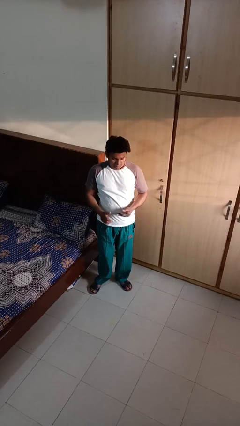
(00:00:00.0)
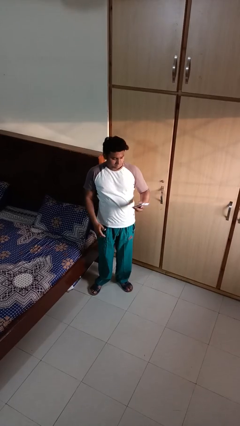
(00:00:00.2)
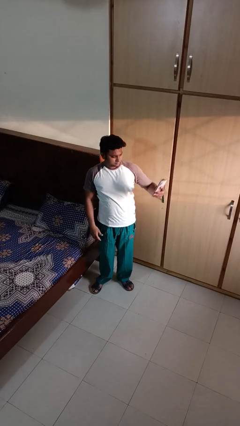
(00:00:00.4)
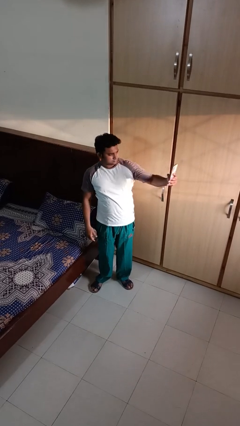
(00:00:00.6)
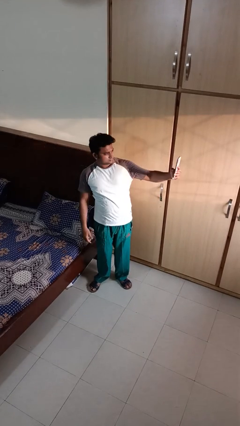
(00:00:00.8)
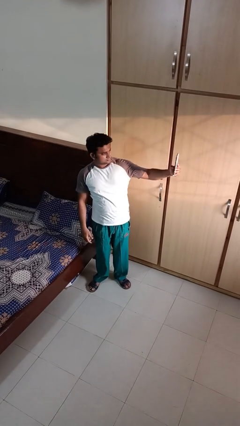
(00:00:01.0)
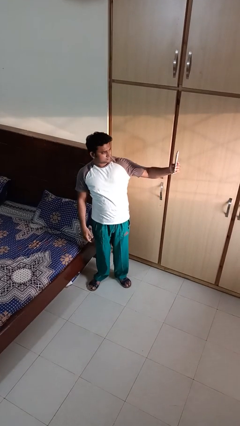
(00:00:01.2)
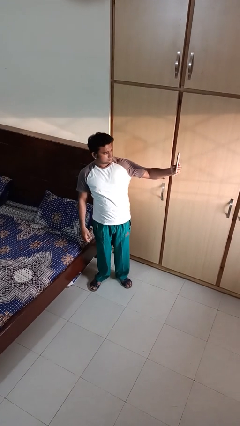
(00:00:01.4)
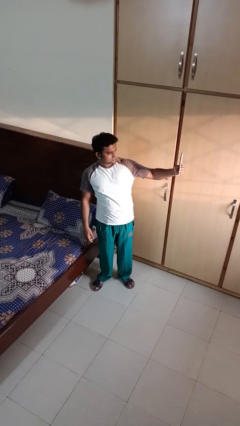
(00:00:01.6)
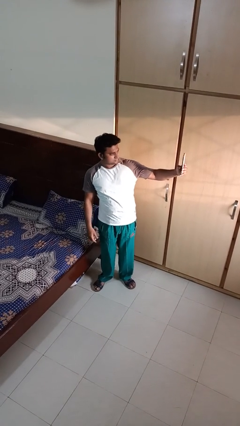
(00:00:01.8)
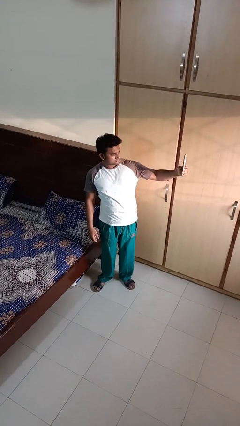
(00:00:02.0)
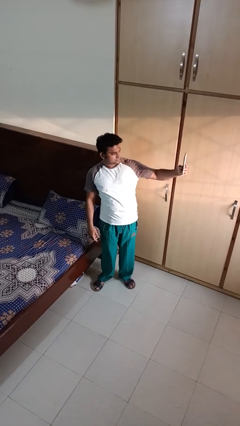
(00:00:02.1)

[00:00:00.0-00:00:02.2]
person takes selfie

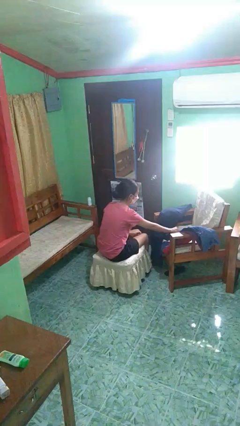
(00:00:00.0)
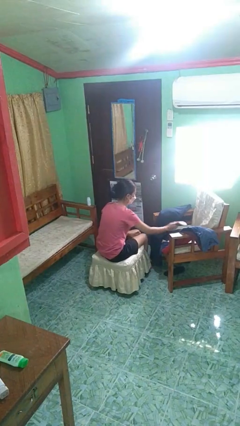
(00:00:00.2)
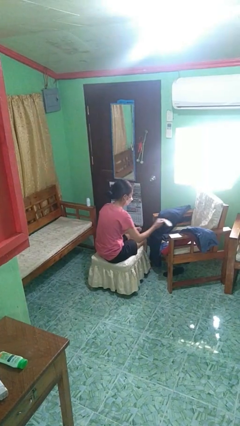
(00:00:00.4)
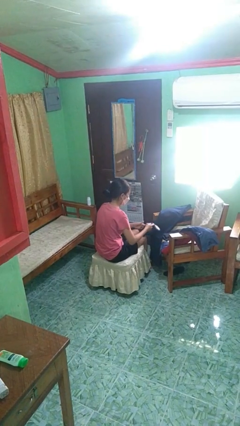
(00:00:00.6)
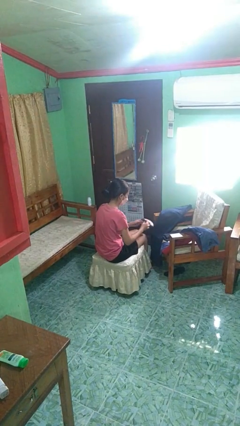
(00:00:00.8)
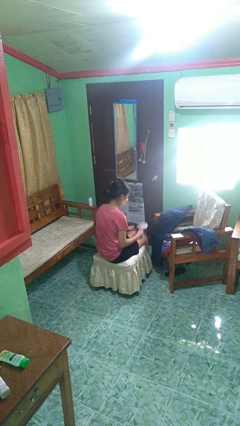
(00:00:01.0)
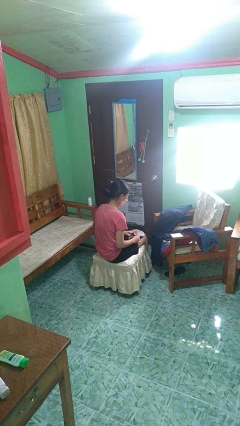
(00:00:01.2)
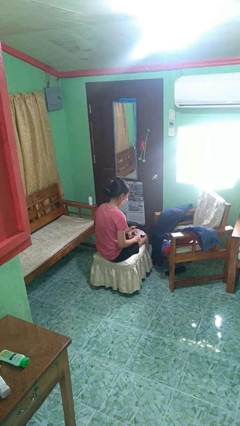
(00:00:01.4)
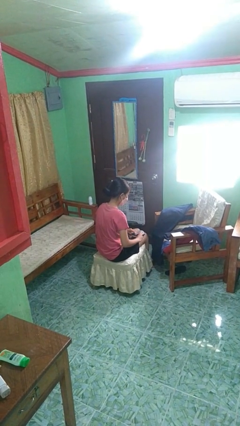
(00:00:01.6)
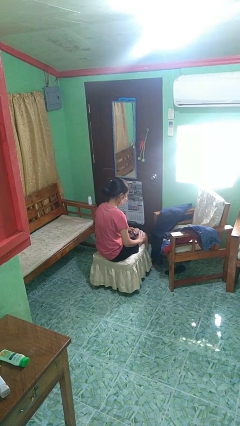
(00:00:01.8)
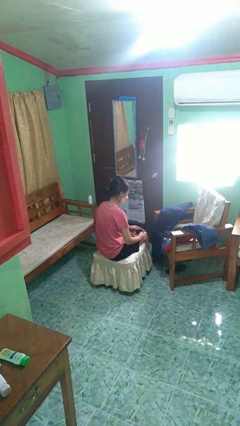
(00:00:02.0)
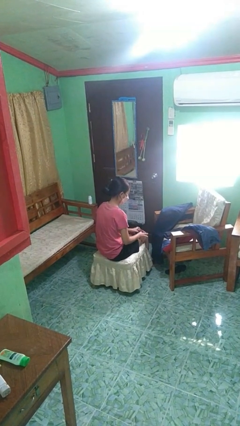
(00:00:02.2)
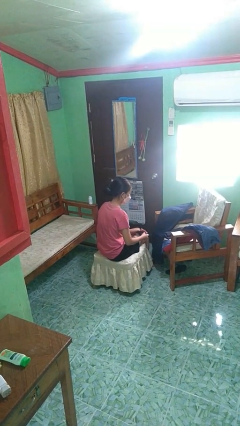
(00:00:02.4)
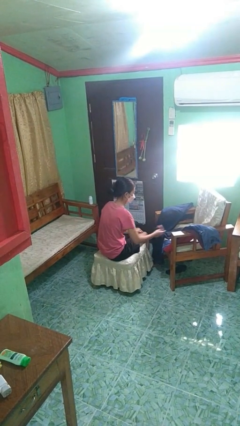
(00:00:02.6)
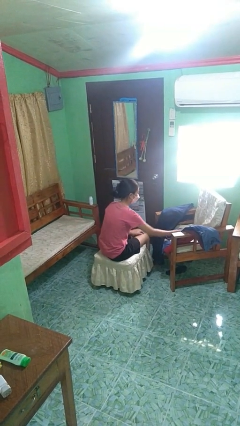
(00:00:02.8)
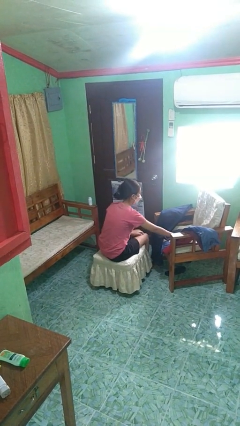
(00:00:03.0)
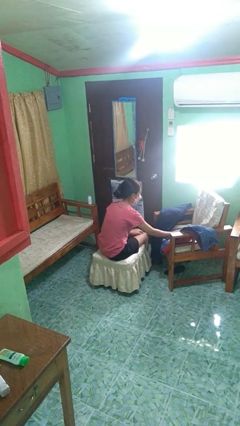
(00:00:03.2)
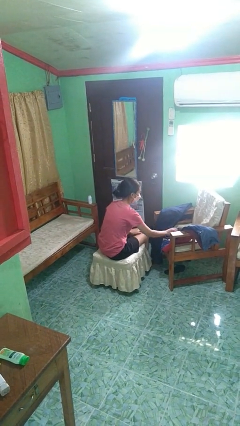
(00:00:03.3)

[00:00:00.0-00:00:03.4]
person folds socks

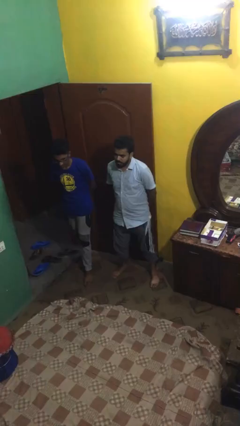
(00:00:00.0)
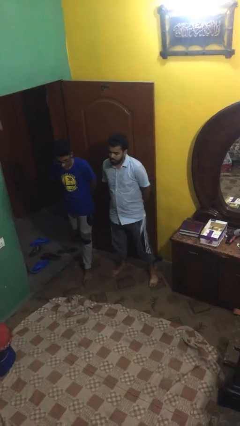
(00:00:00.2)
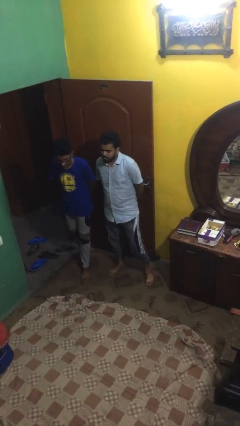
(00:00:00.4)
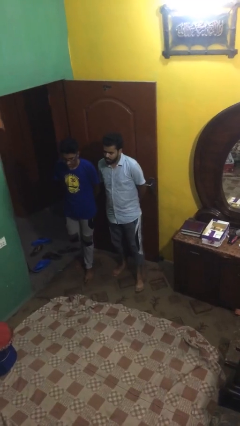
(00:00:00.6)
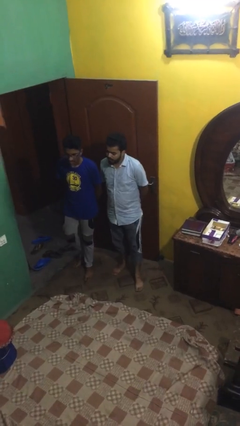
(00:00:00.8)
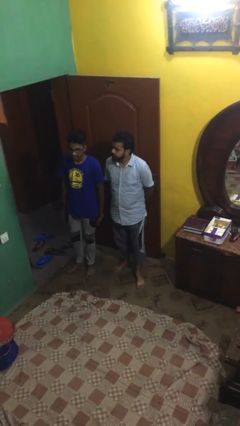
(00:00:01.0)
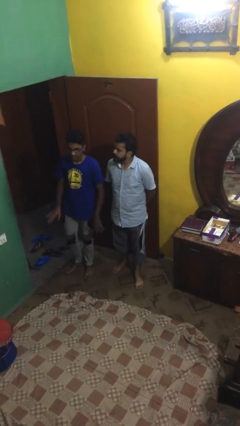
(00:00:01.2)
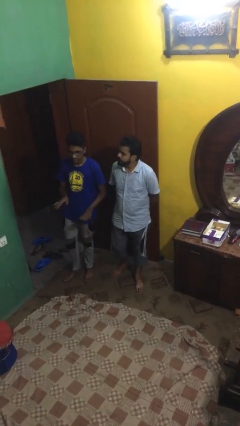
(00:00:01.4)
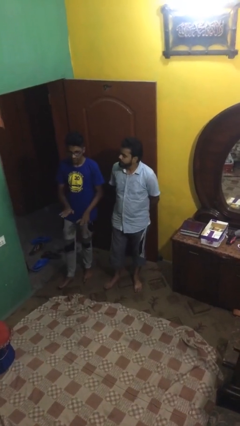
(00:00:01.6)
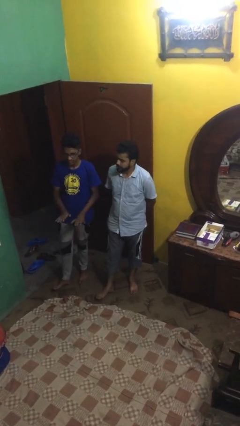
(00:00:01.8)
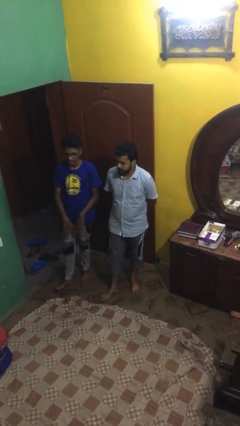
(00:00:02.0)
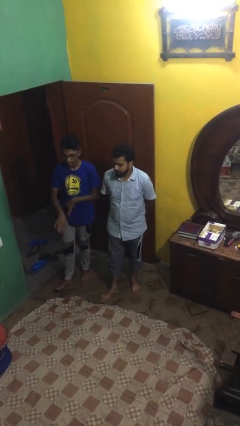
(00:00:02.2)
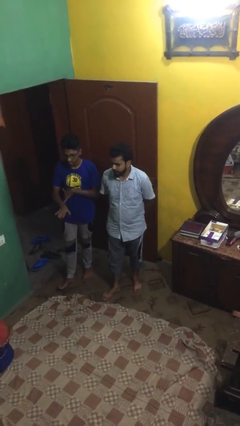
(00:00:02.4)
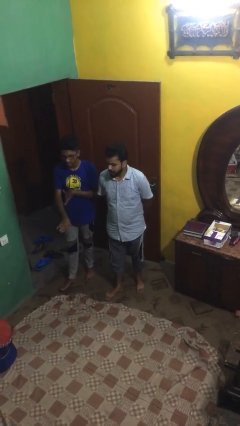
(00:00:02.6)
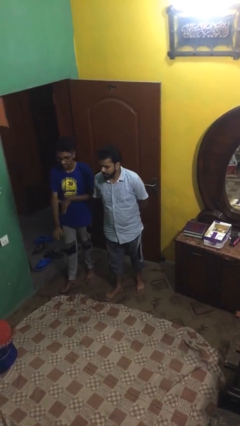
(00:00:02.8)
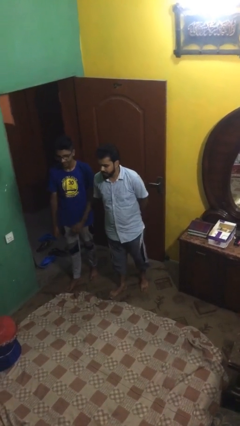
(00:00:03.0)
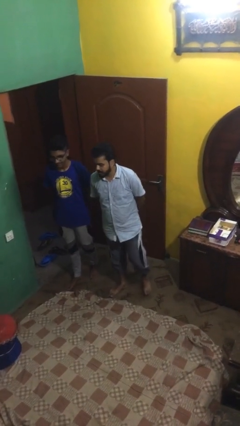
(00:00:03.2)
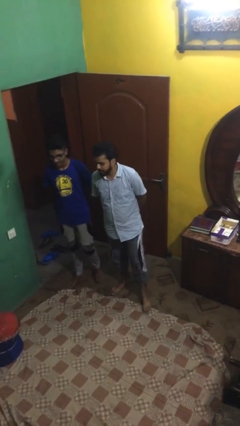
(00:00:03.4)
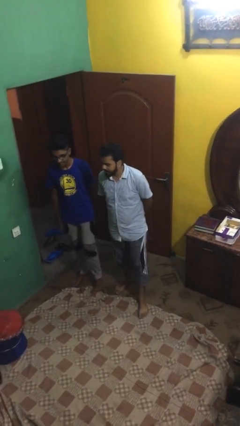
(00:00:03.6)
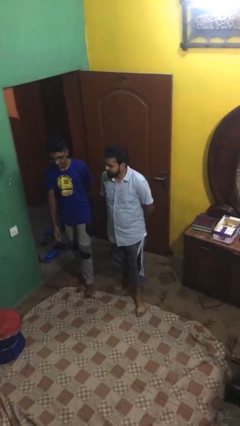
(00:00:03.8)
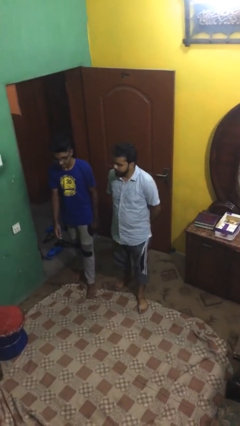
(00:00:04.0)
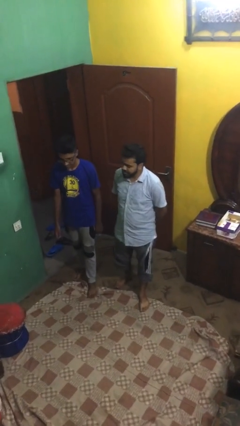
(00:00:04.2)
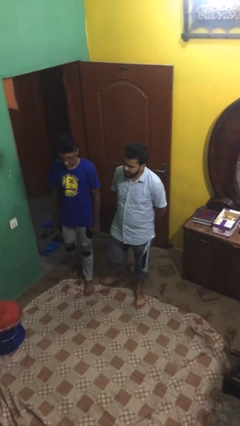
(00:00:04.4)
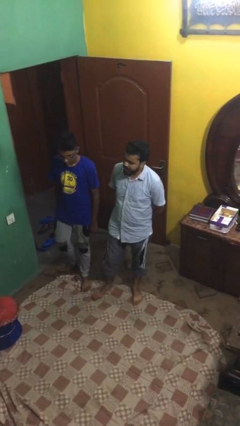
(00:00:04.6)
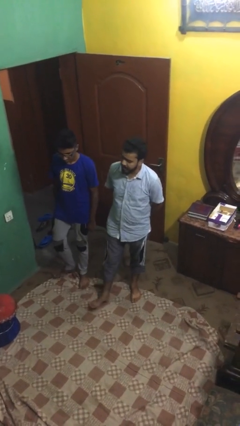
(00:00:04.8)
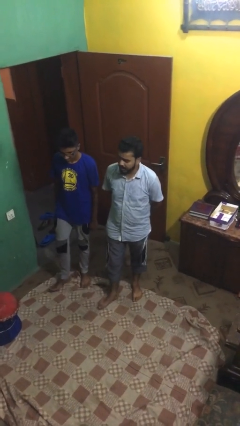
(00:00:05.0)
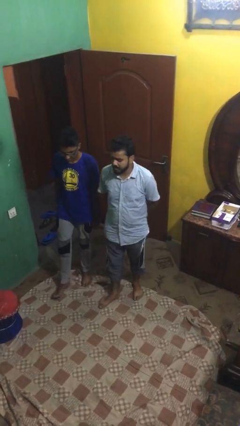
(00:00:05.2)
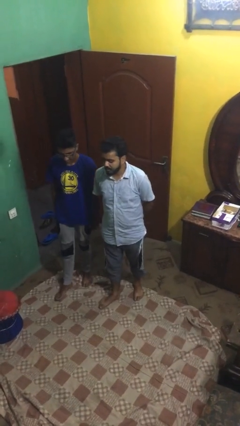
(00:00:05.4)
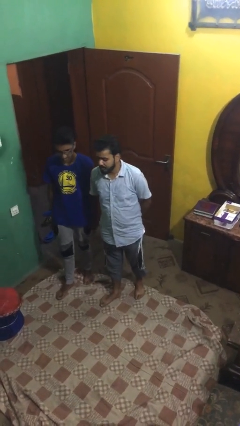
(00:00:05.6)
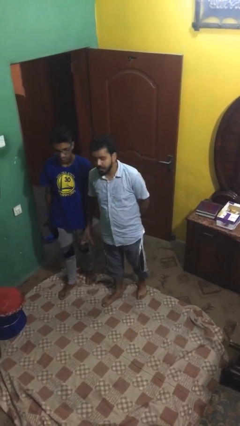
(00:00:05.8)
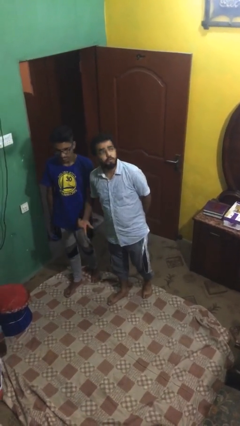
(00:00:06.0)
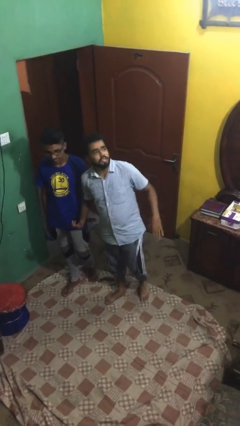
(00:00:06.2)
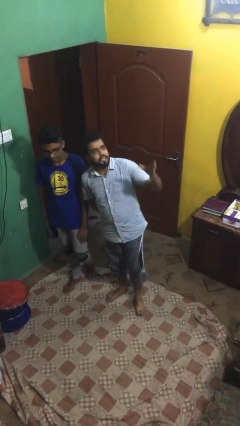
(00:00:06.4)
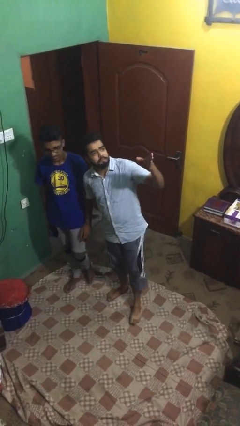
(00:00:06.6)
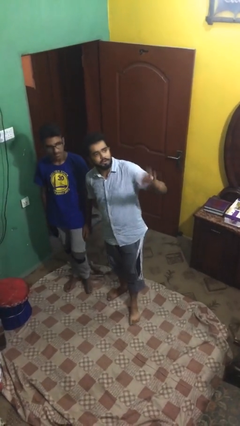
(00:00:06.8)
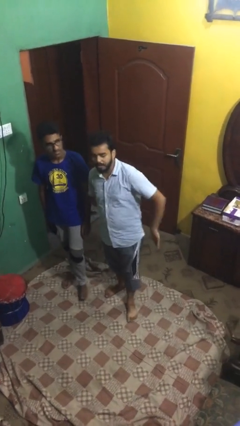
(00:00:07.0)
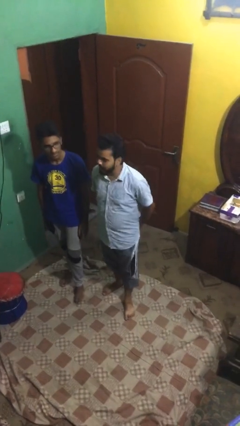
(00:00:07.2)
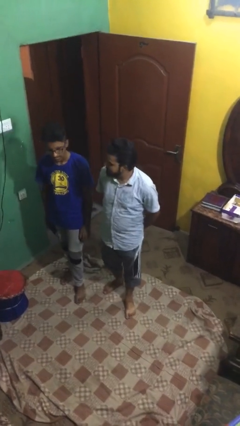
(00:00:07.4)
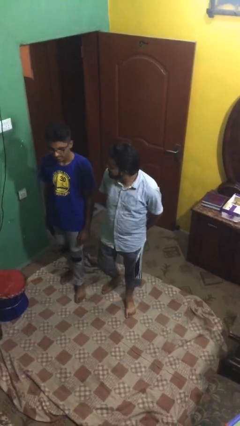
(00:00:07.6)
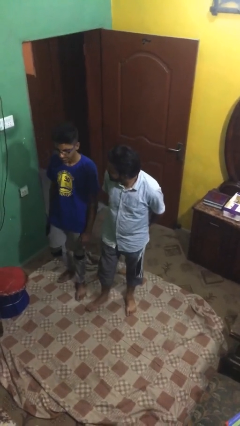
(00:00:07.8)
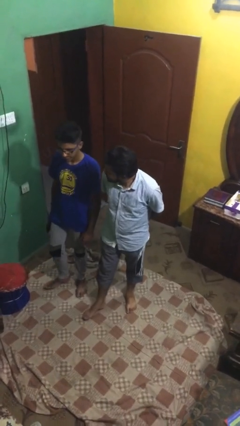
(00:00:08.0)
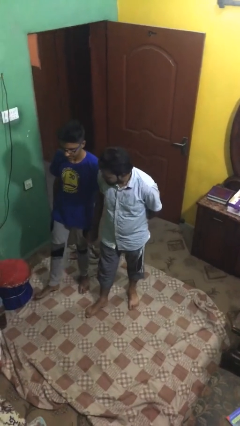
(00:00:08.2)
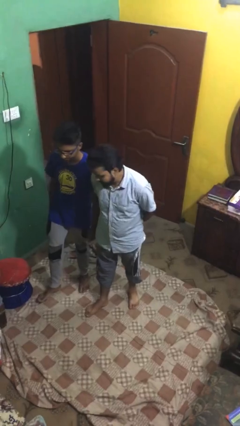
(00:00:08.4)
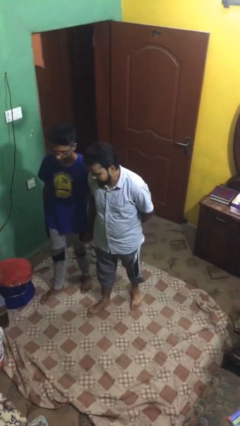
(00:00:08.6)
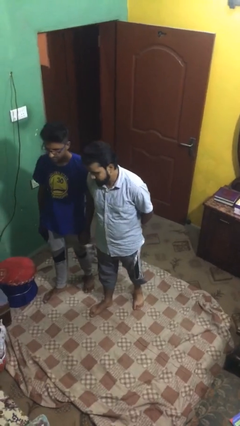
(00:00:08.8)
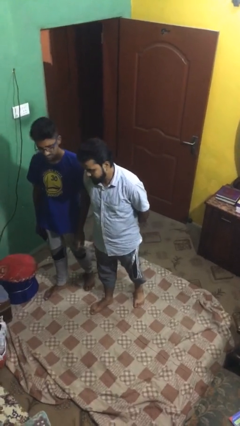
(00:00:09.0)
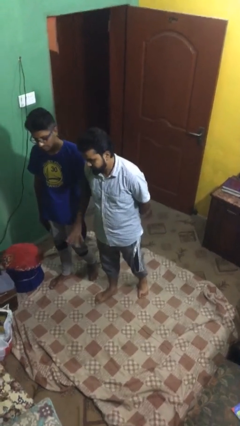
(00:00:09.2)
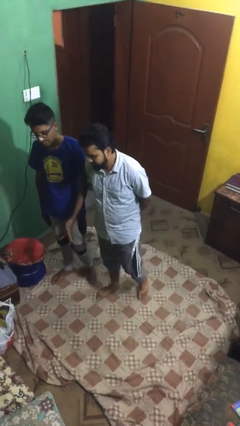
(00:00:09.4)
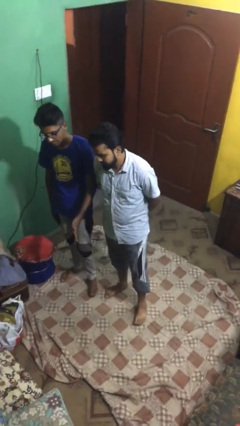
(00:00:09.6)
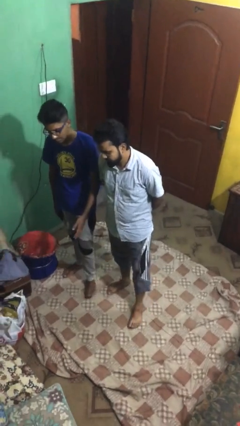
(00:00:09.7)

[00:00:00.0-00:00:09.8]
person talks to person

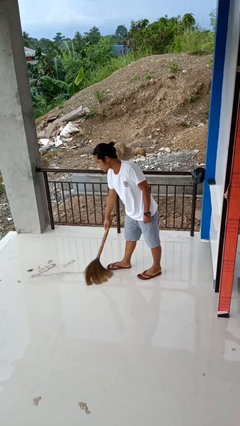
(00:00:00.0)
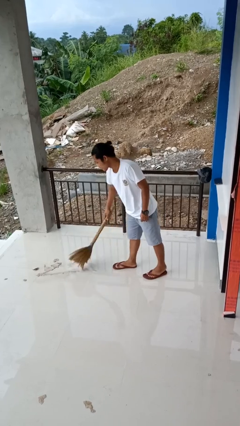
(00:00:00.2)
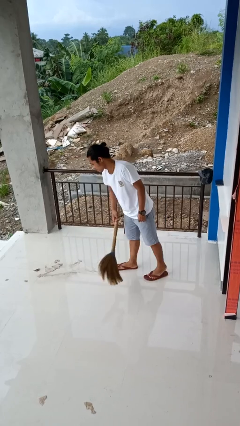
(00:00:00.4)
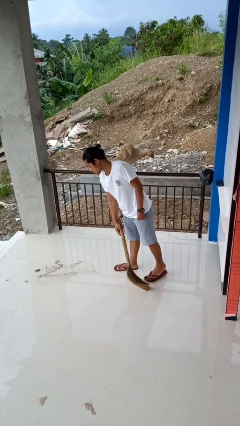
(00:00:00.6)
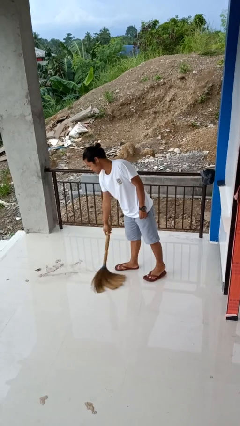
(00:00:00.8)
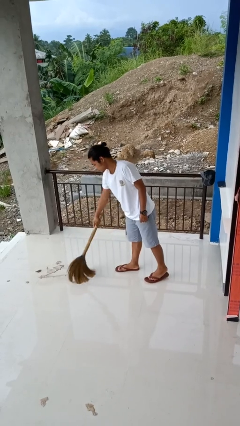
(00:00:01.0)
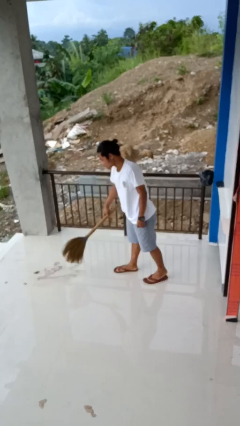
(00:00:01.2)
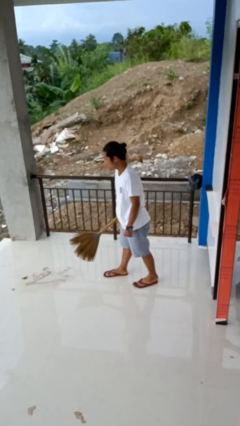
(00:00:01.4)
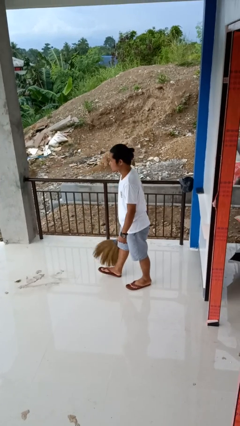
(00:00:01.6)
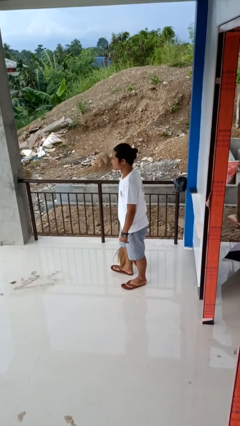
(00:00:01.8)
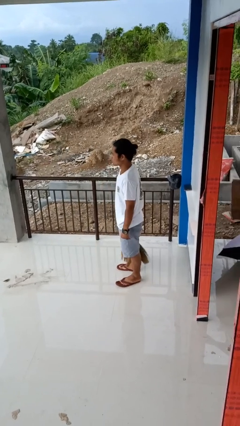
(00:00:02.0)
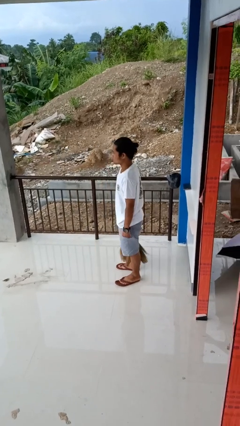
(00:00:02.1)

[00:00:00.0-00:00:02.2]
person sweeps floor

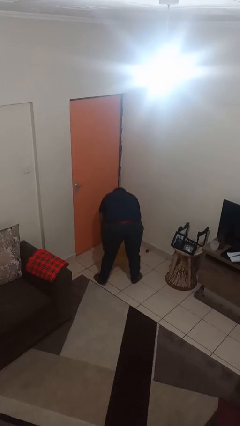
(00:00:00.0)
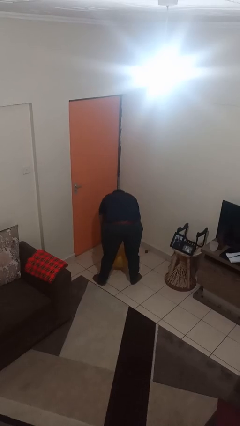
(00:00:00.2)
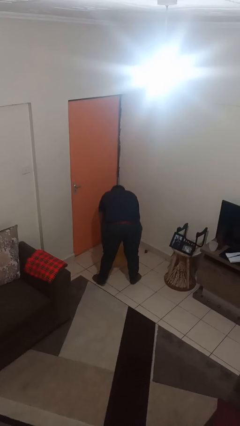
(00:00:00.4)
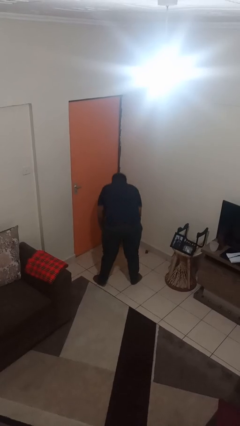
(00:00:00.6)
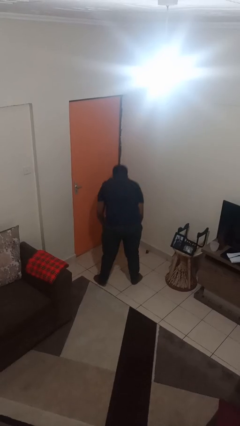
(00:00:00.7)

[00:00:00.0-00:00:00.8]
person catches dropped object
